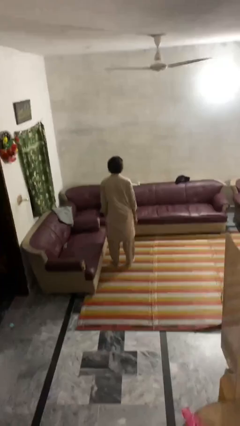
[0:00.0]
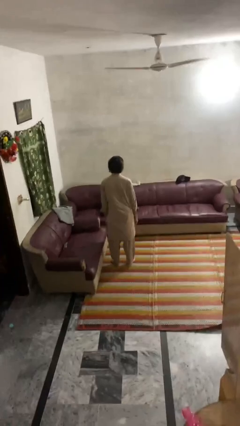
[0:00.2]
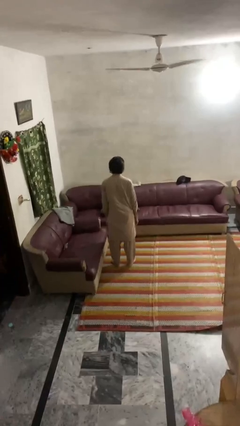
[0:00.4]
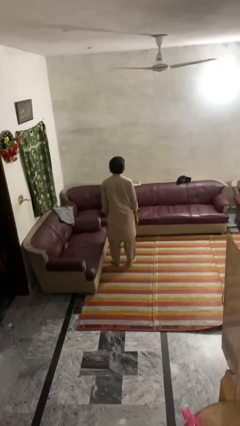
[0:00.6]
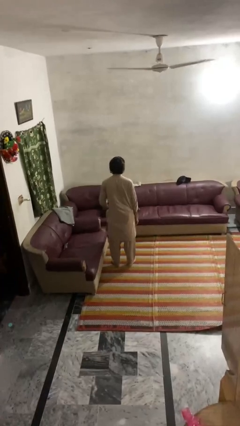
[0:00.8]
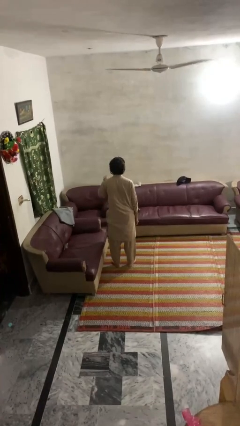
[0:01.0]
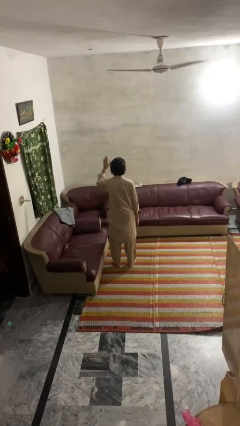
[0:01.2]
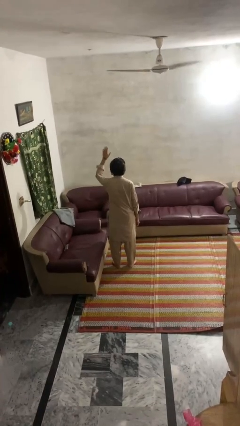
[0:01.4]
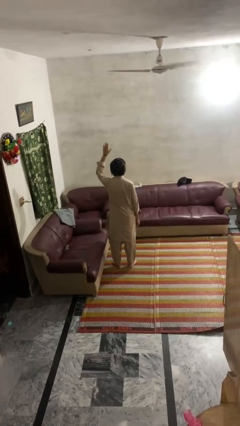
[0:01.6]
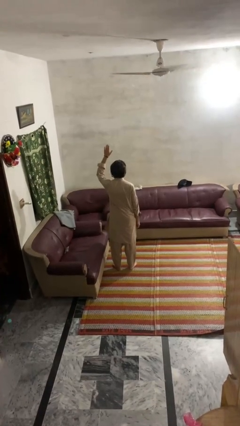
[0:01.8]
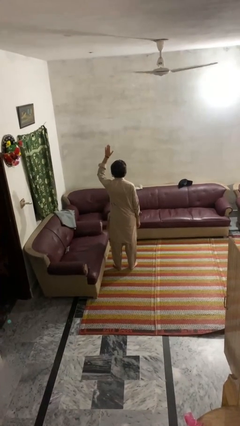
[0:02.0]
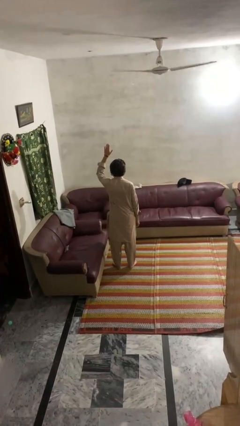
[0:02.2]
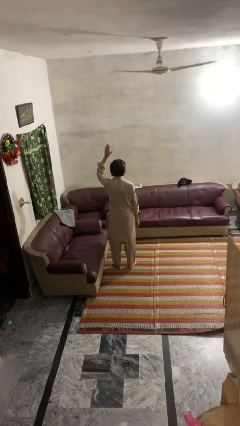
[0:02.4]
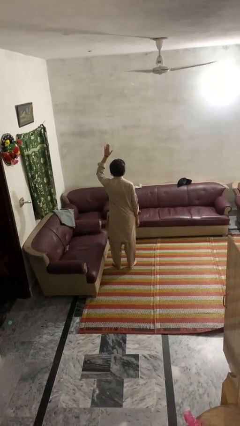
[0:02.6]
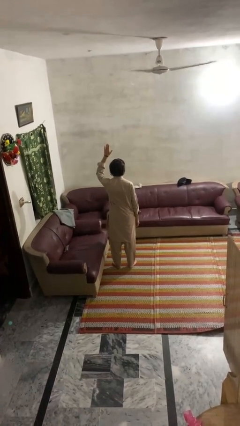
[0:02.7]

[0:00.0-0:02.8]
person gestures raise hand

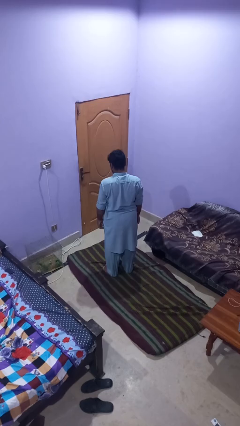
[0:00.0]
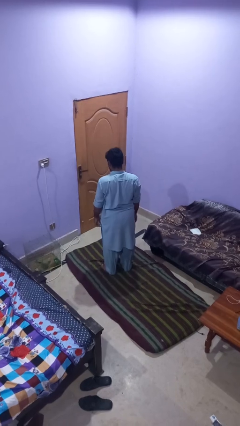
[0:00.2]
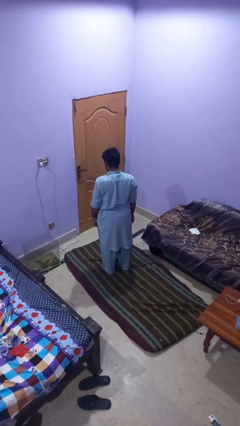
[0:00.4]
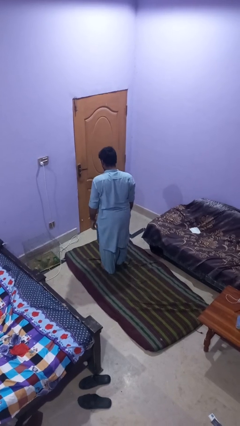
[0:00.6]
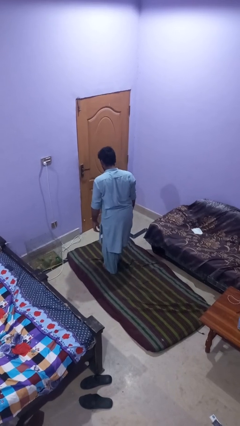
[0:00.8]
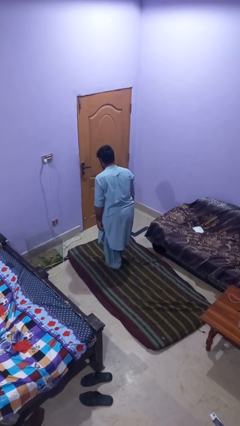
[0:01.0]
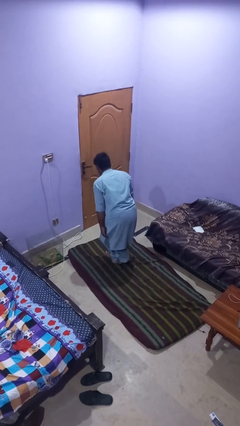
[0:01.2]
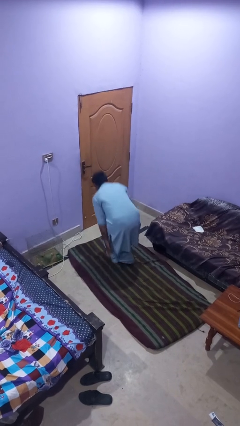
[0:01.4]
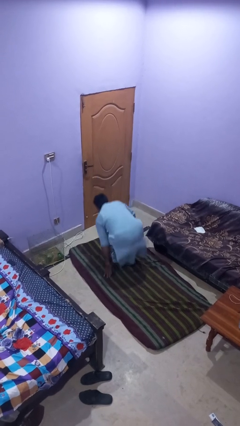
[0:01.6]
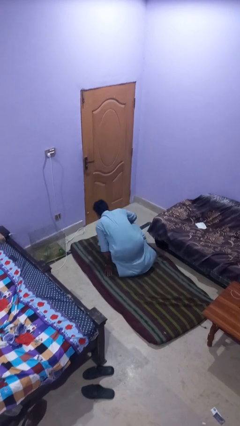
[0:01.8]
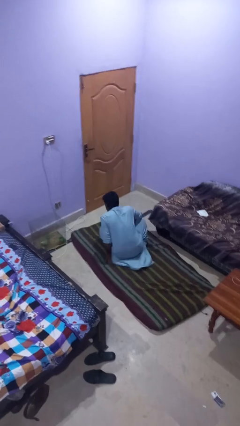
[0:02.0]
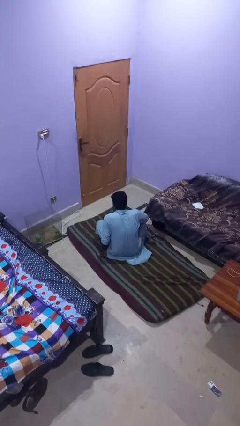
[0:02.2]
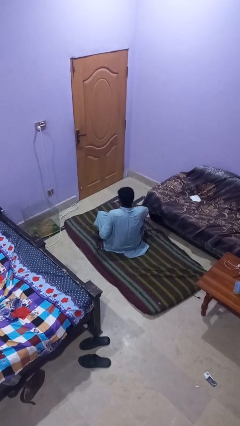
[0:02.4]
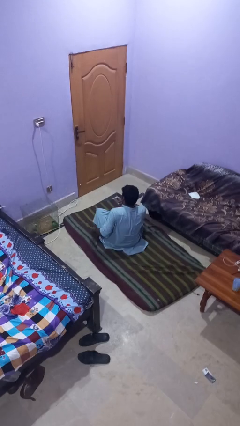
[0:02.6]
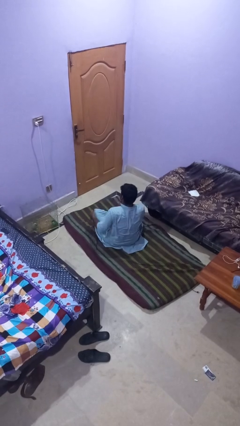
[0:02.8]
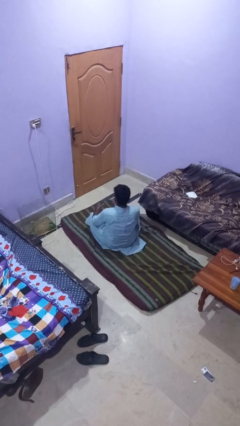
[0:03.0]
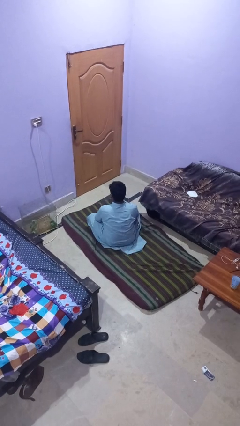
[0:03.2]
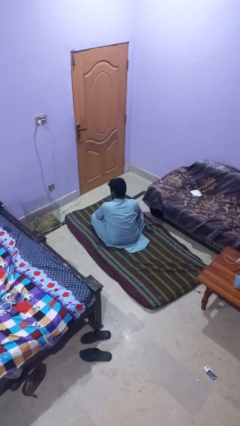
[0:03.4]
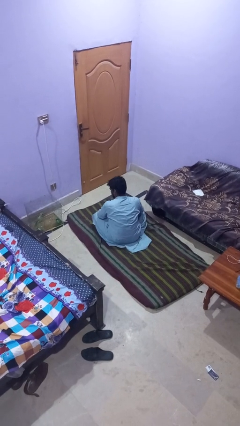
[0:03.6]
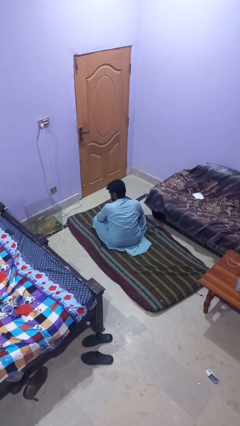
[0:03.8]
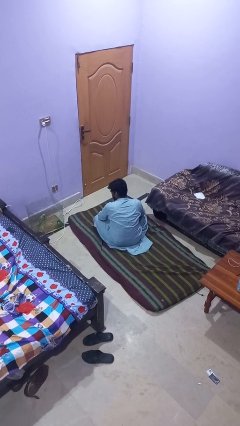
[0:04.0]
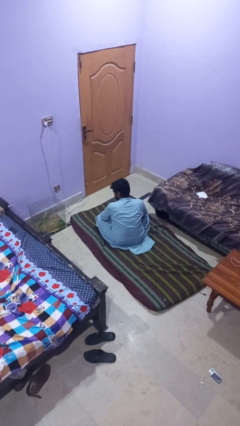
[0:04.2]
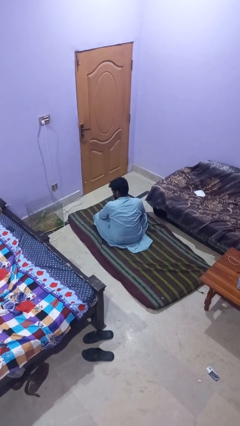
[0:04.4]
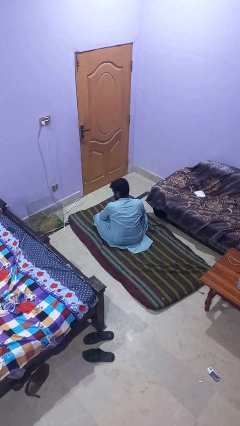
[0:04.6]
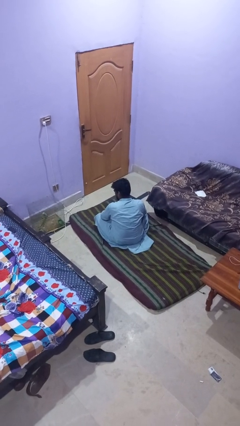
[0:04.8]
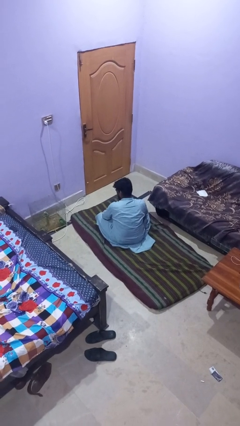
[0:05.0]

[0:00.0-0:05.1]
person sits crisscross

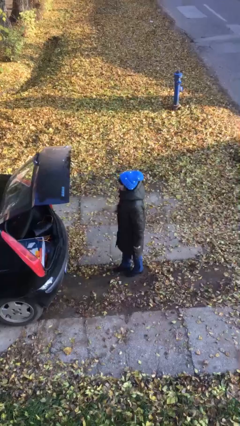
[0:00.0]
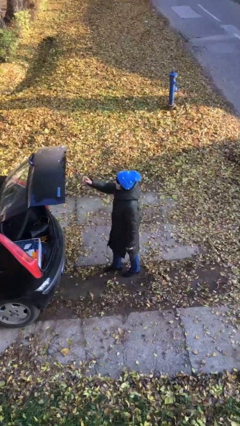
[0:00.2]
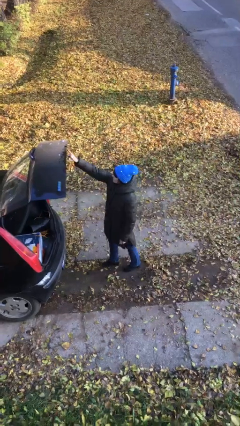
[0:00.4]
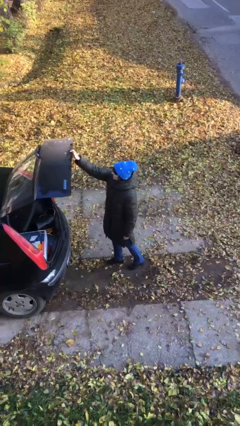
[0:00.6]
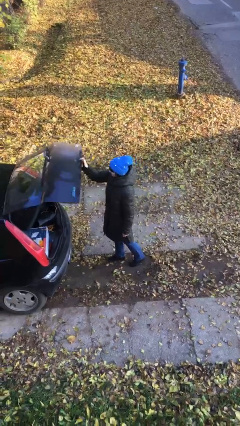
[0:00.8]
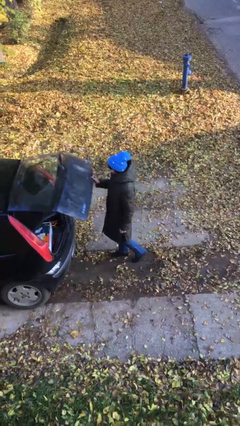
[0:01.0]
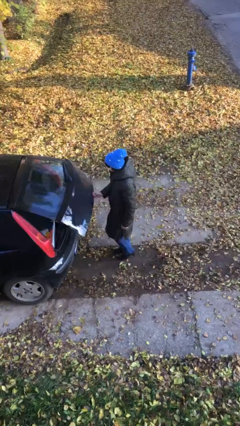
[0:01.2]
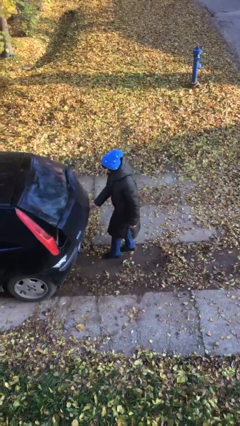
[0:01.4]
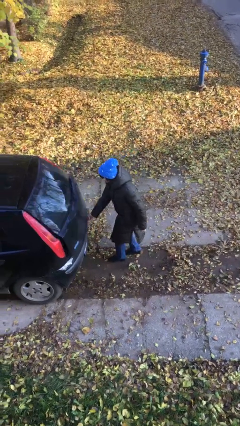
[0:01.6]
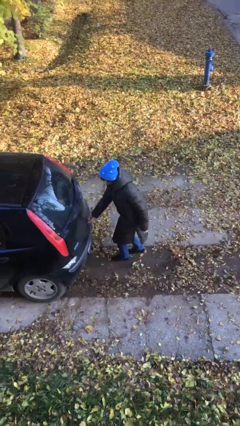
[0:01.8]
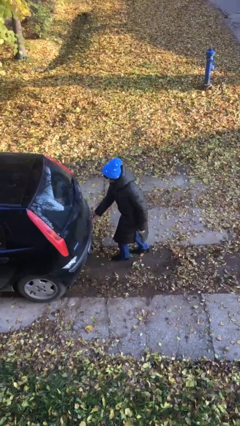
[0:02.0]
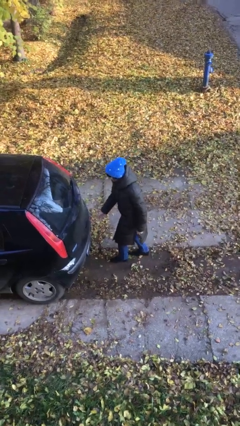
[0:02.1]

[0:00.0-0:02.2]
person closes car trunk

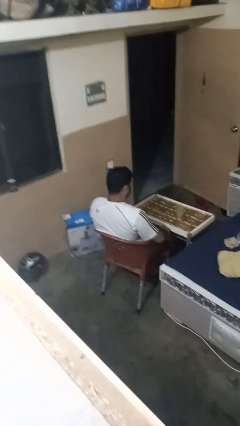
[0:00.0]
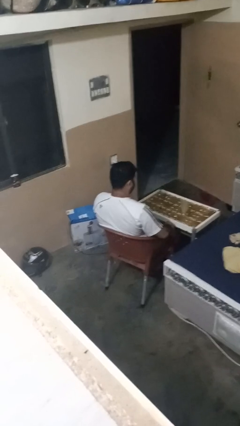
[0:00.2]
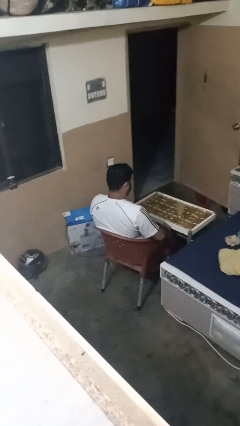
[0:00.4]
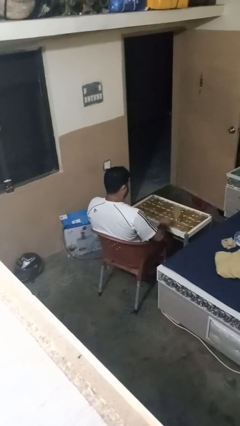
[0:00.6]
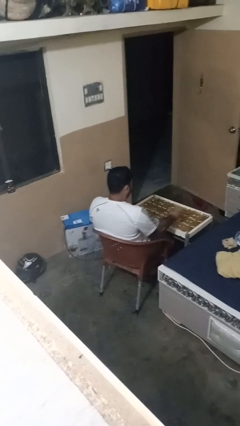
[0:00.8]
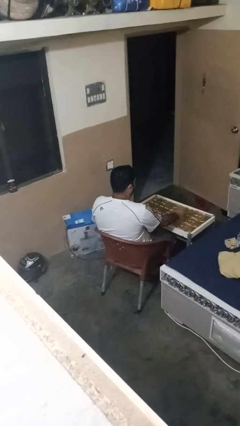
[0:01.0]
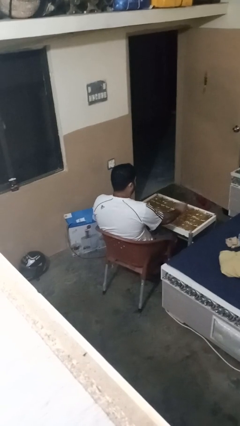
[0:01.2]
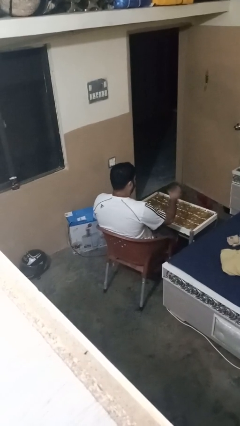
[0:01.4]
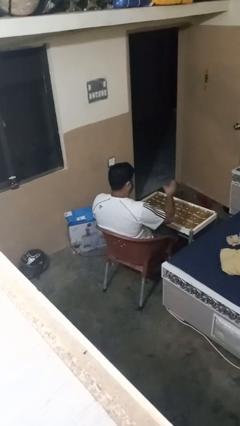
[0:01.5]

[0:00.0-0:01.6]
person picks up object from table

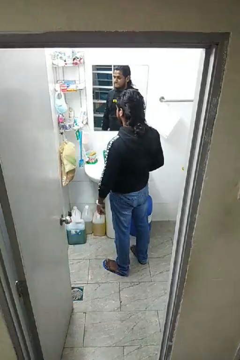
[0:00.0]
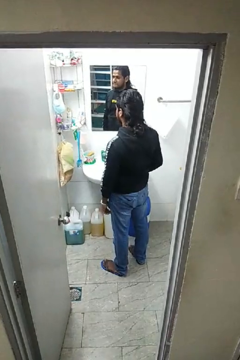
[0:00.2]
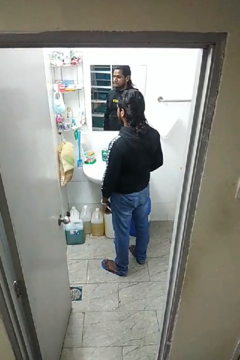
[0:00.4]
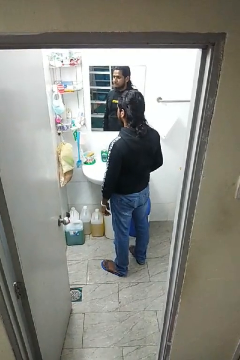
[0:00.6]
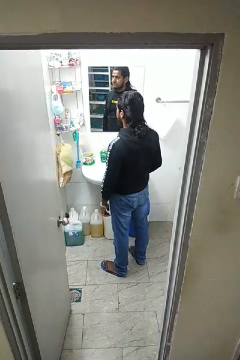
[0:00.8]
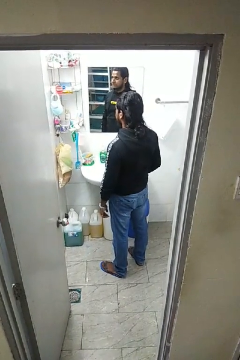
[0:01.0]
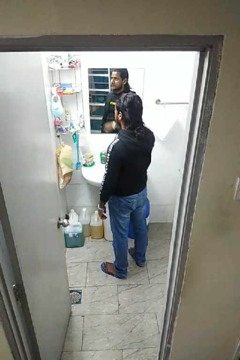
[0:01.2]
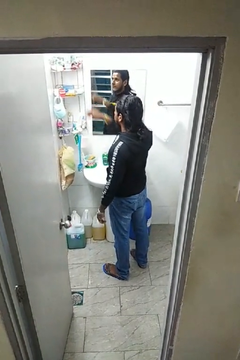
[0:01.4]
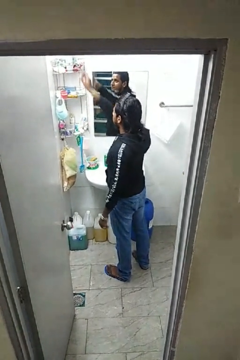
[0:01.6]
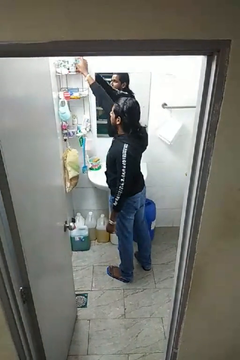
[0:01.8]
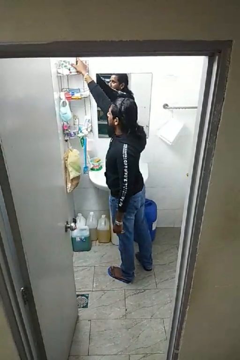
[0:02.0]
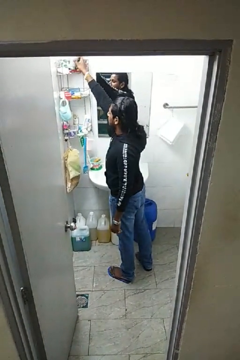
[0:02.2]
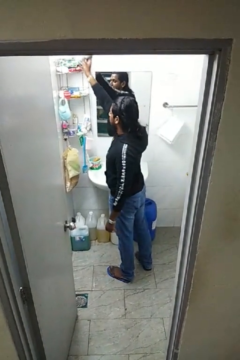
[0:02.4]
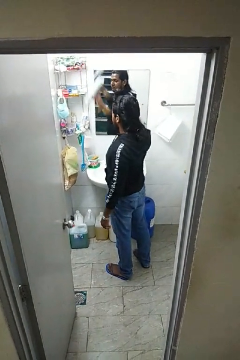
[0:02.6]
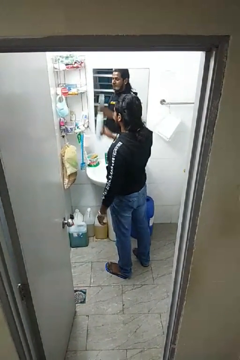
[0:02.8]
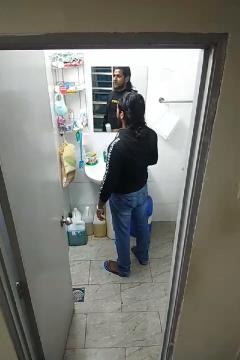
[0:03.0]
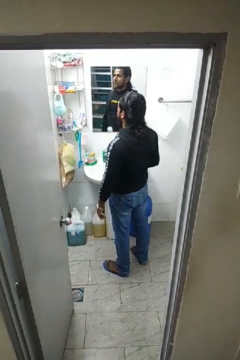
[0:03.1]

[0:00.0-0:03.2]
person picks up object from countertop

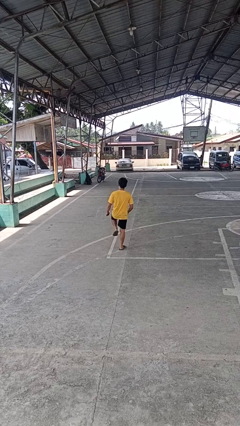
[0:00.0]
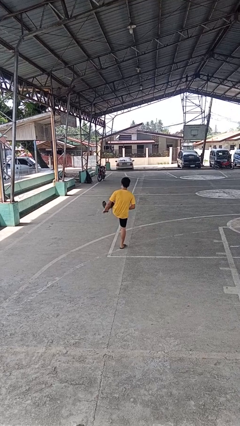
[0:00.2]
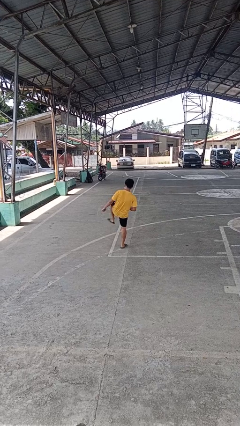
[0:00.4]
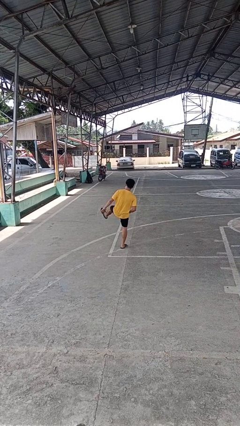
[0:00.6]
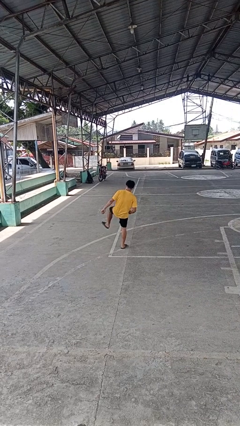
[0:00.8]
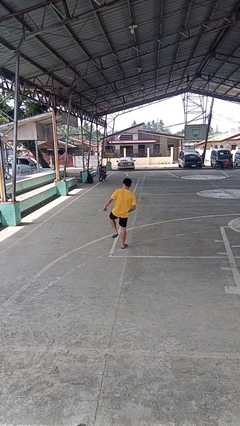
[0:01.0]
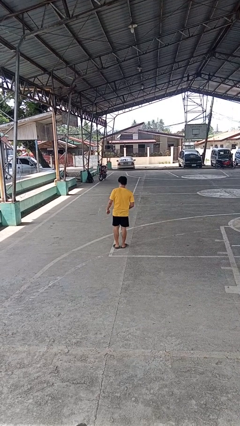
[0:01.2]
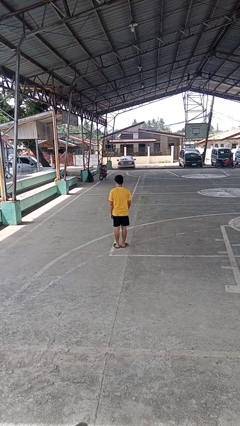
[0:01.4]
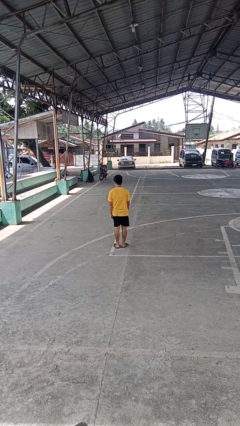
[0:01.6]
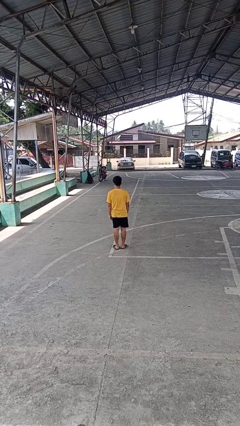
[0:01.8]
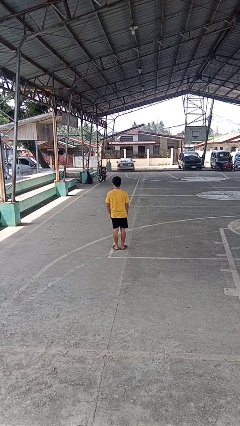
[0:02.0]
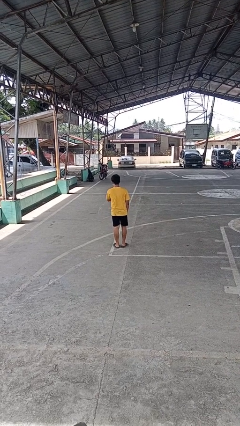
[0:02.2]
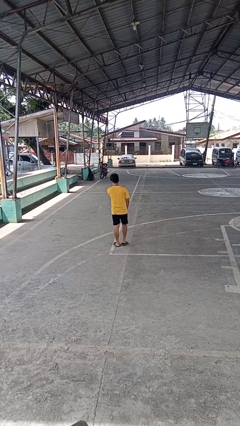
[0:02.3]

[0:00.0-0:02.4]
person karate kicks

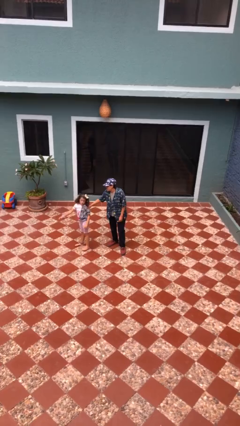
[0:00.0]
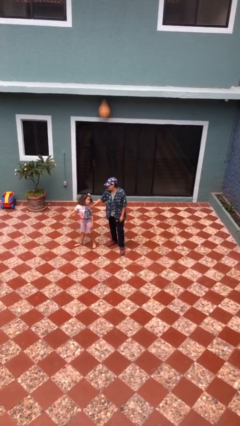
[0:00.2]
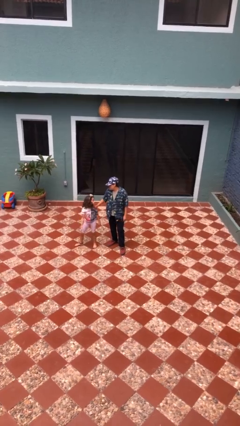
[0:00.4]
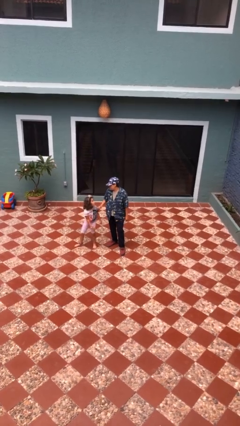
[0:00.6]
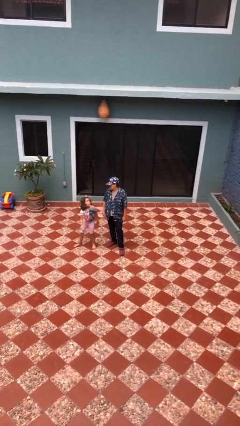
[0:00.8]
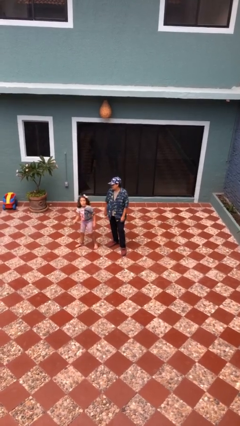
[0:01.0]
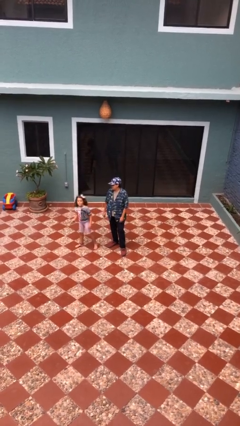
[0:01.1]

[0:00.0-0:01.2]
person spins person around
